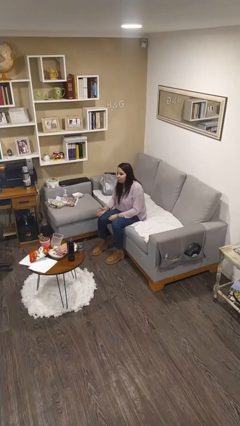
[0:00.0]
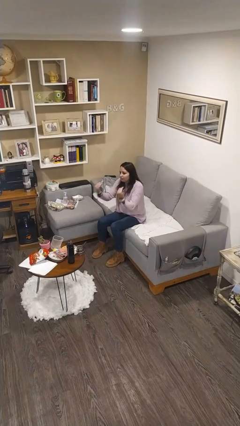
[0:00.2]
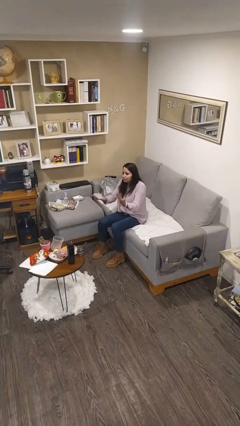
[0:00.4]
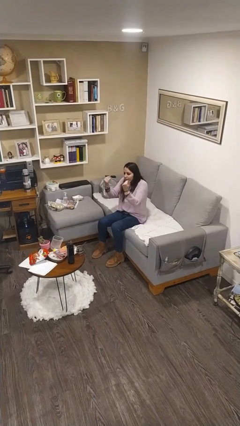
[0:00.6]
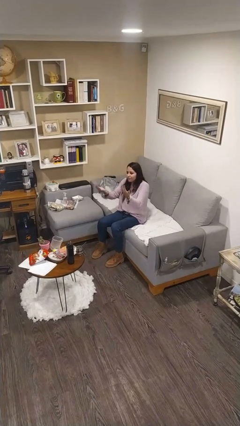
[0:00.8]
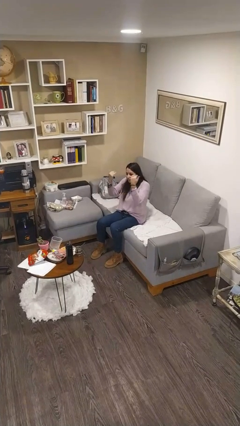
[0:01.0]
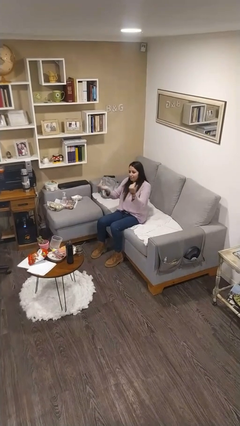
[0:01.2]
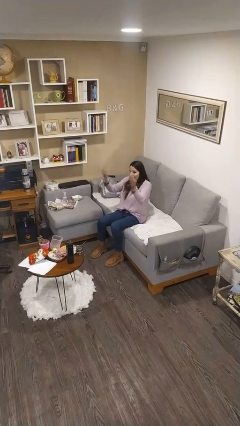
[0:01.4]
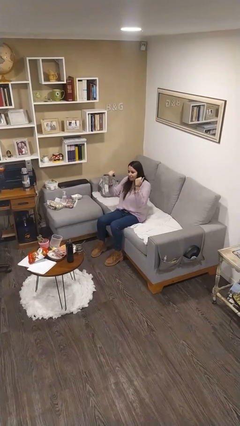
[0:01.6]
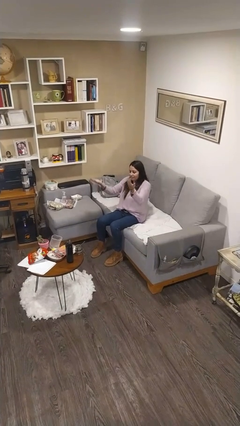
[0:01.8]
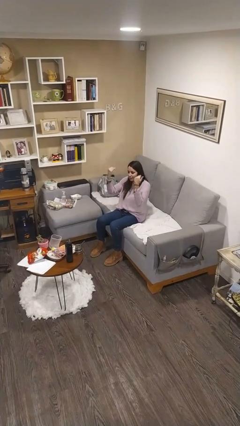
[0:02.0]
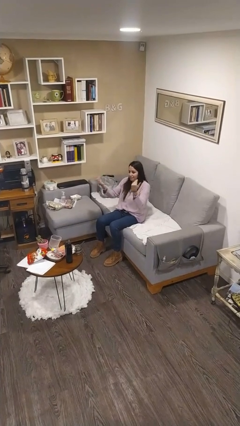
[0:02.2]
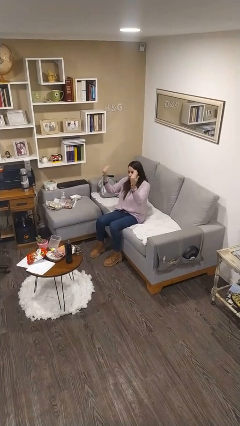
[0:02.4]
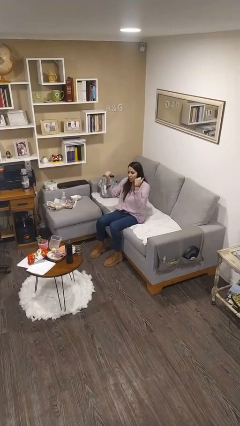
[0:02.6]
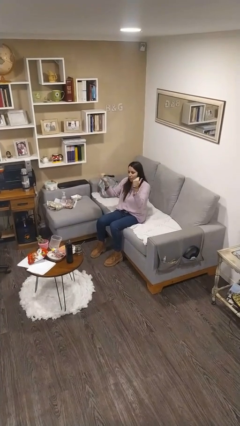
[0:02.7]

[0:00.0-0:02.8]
person gestures come here

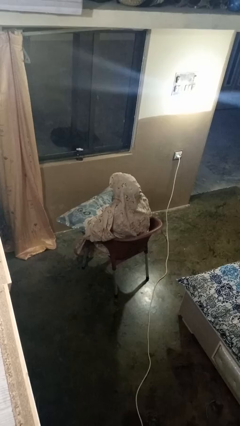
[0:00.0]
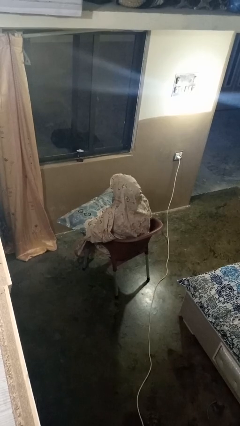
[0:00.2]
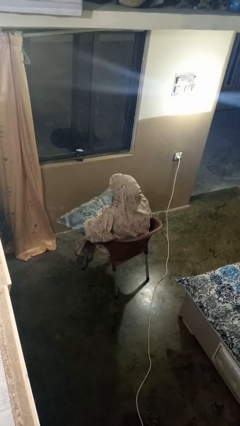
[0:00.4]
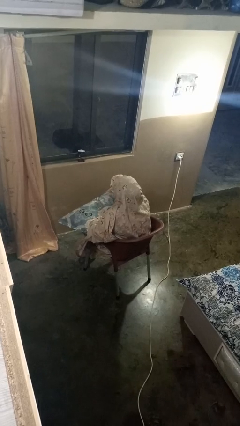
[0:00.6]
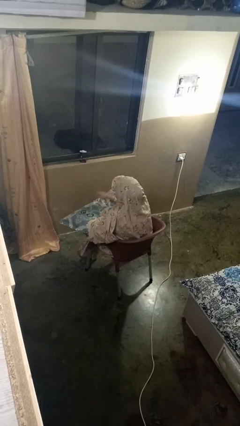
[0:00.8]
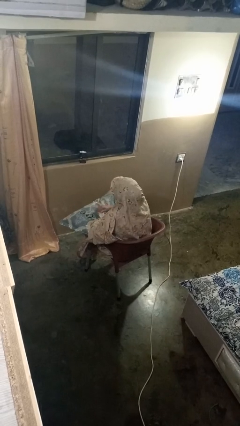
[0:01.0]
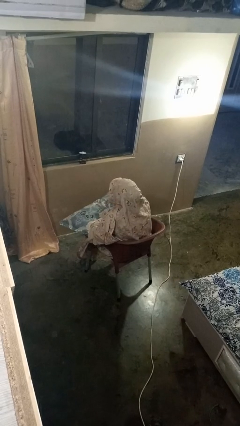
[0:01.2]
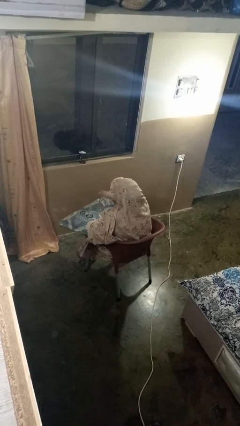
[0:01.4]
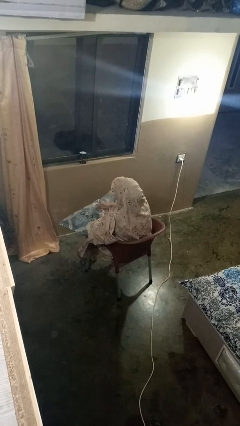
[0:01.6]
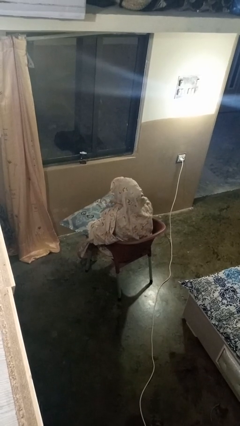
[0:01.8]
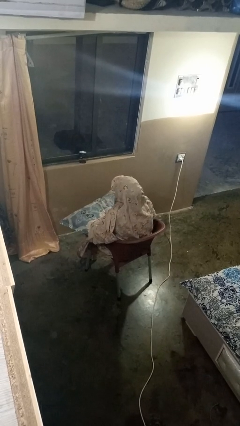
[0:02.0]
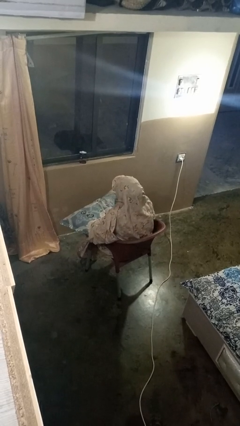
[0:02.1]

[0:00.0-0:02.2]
person waves hand over object

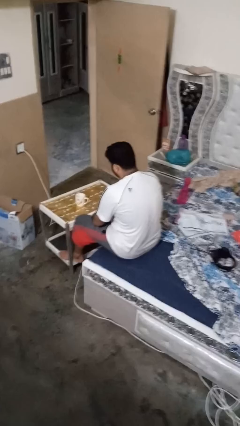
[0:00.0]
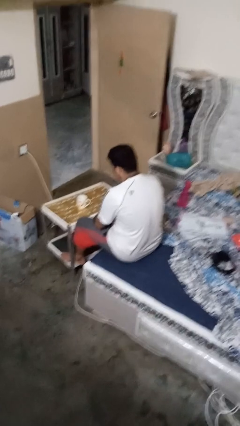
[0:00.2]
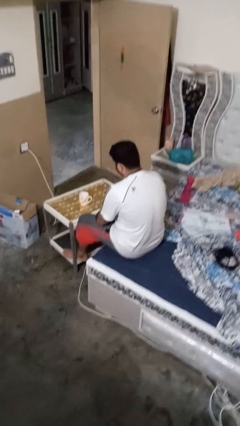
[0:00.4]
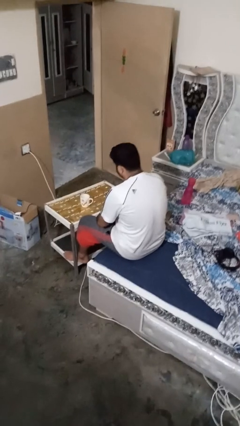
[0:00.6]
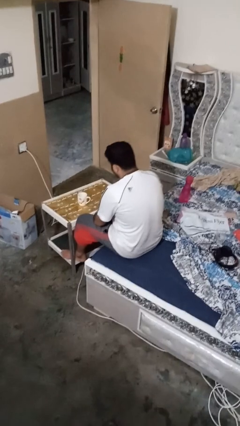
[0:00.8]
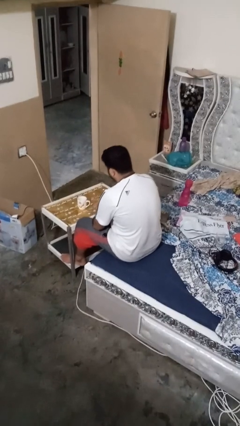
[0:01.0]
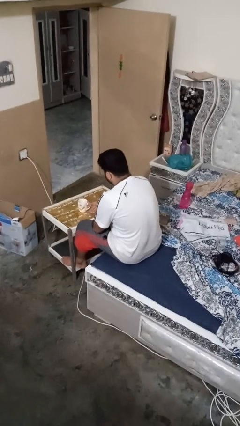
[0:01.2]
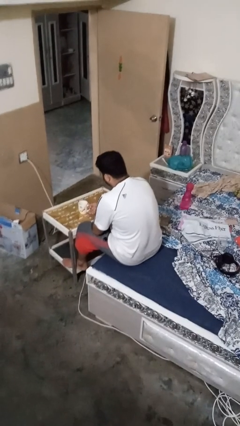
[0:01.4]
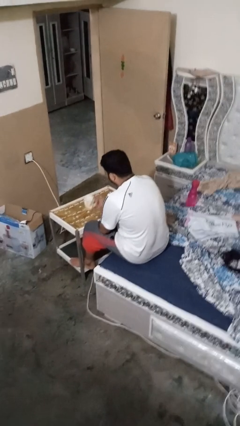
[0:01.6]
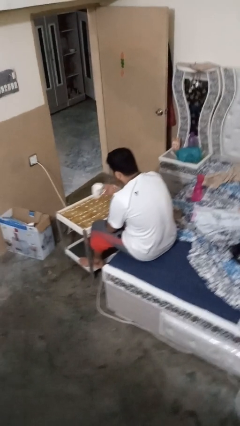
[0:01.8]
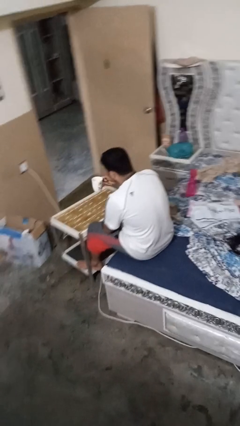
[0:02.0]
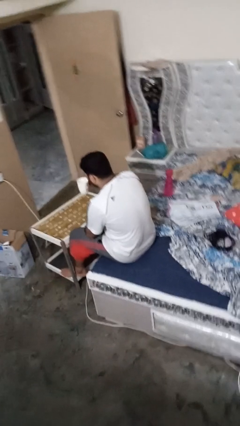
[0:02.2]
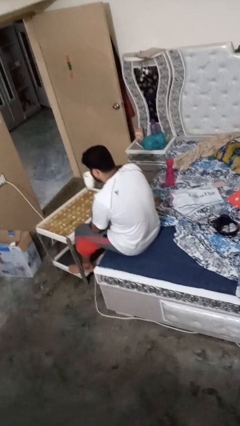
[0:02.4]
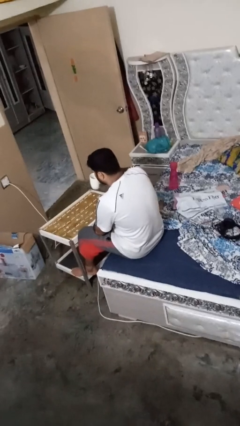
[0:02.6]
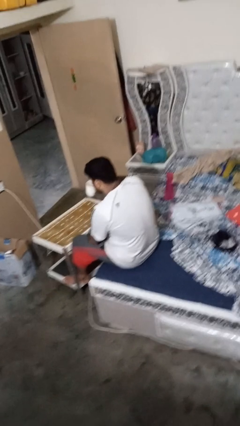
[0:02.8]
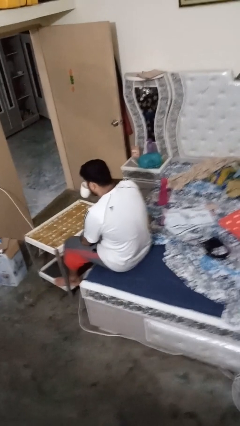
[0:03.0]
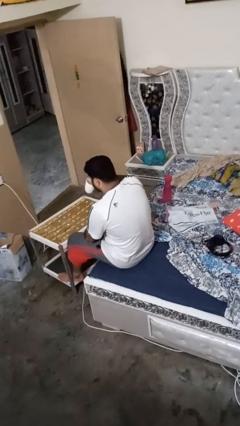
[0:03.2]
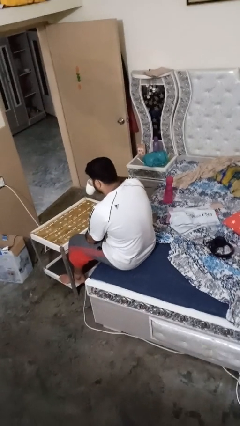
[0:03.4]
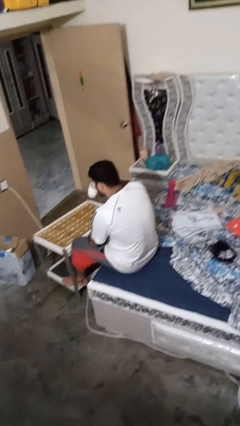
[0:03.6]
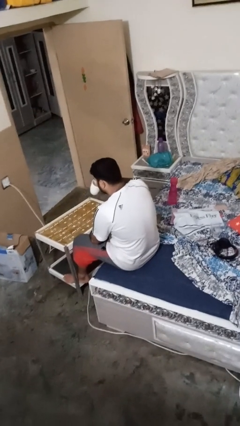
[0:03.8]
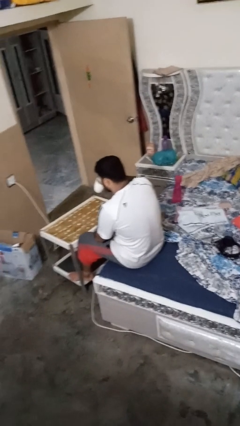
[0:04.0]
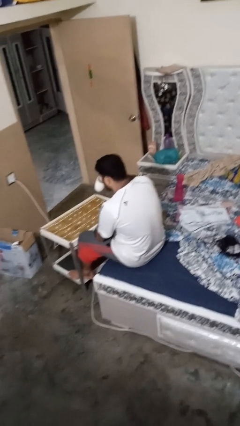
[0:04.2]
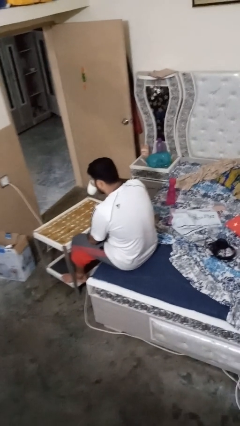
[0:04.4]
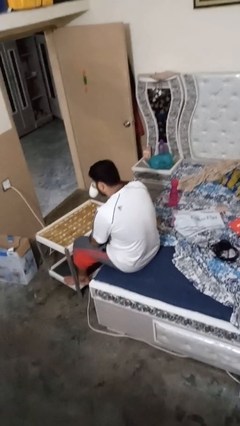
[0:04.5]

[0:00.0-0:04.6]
person picks up object from table

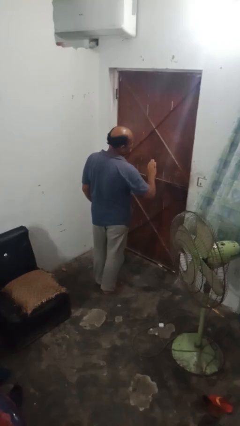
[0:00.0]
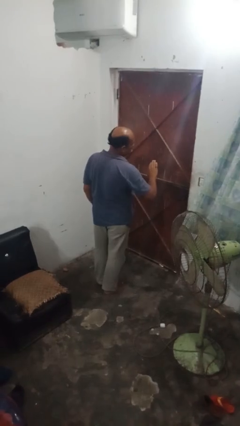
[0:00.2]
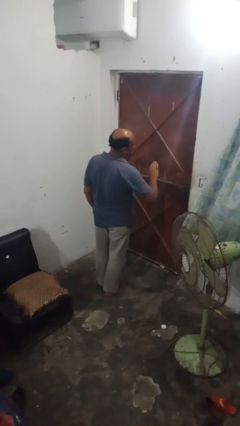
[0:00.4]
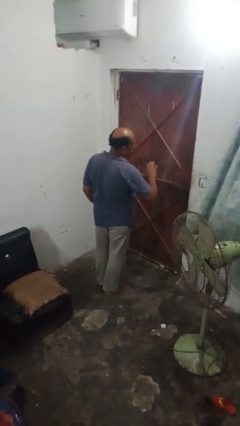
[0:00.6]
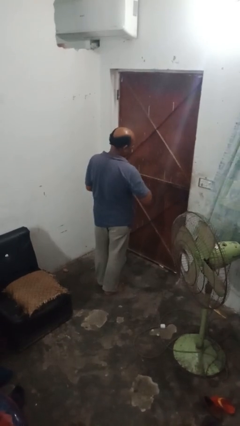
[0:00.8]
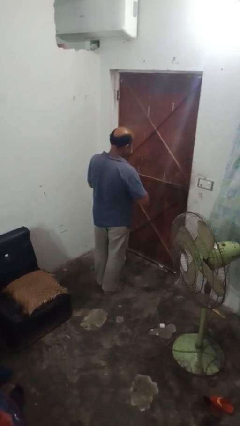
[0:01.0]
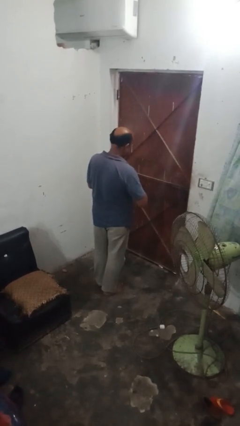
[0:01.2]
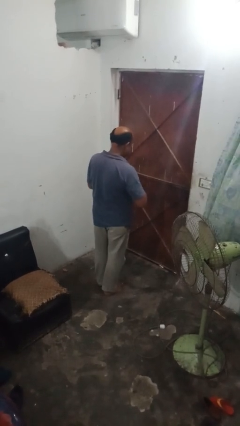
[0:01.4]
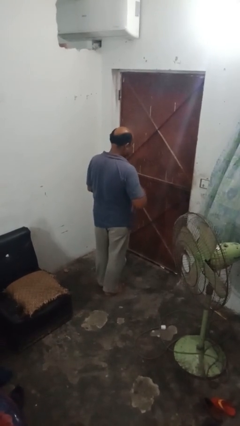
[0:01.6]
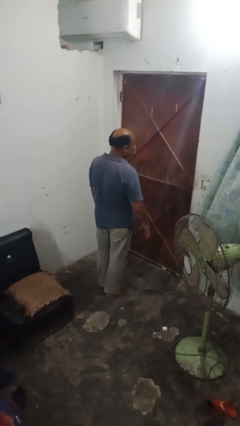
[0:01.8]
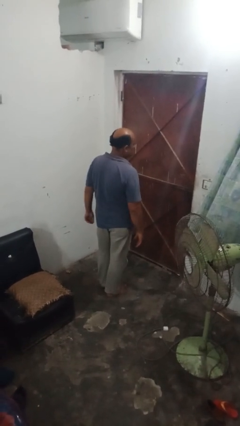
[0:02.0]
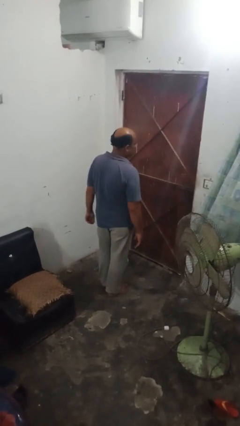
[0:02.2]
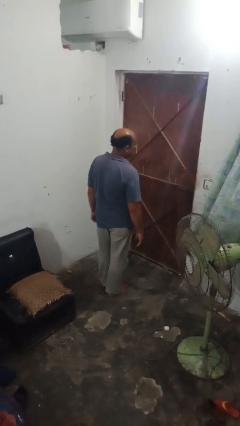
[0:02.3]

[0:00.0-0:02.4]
person takes off ring

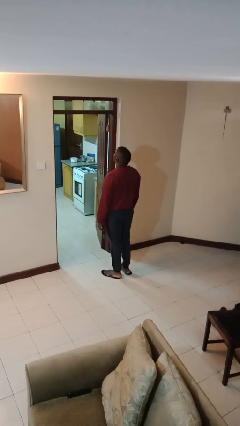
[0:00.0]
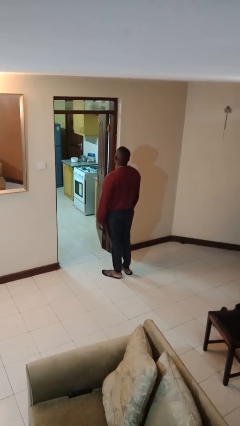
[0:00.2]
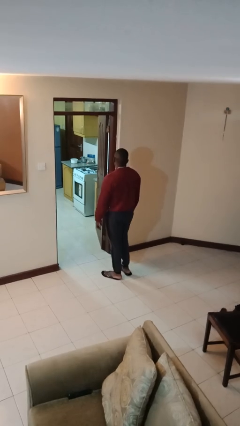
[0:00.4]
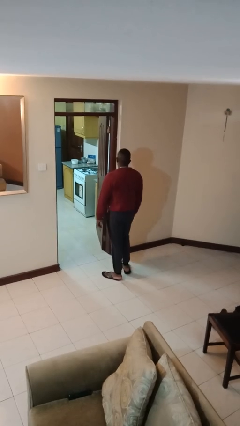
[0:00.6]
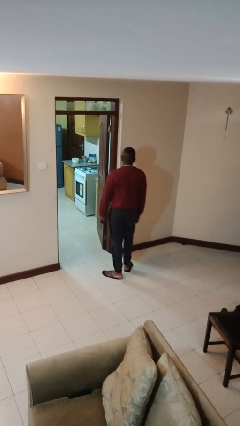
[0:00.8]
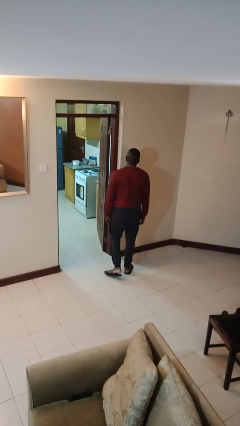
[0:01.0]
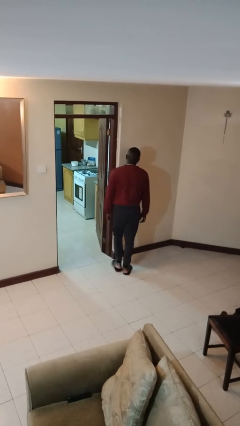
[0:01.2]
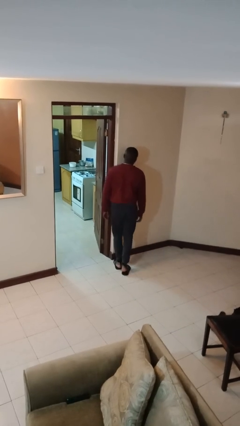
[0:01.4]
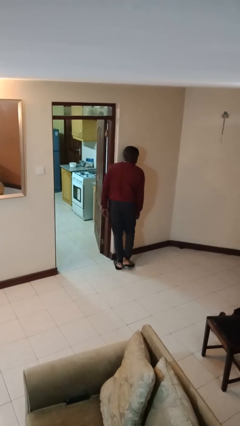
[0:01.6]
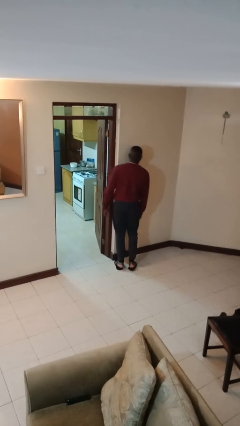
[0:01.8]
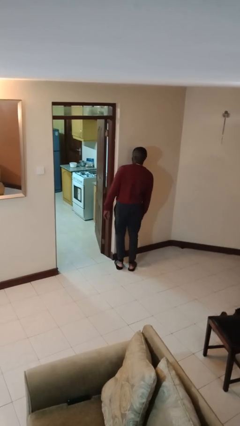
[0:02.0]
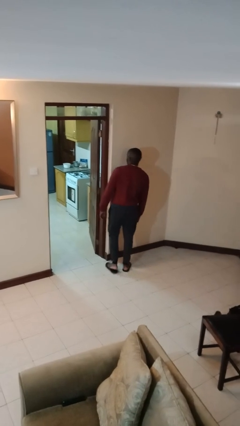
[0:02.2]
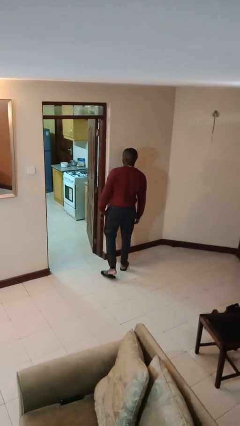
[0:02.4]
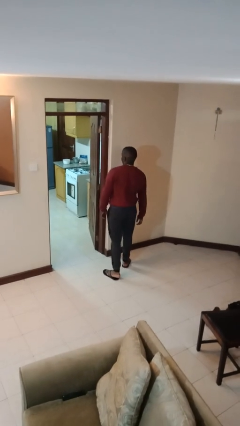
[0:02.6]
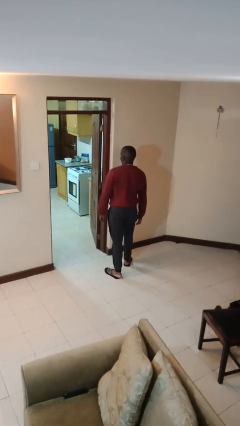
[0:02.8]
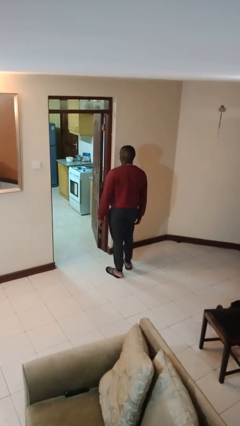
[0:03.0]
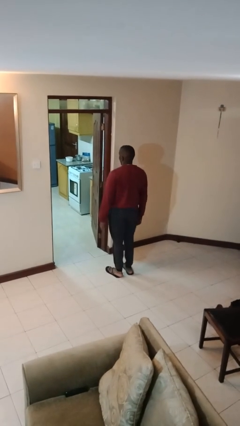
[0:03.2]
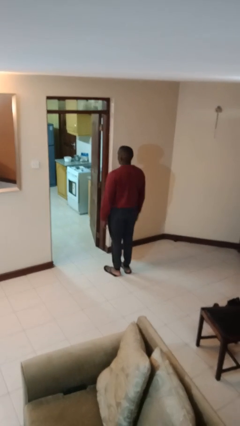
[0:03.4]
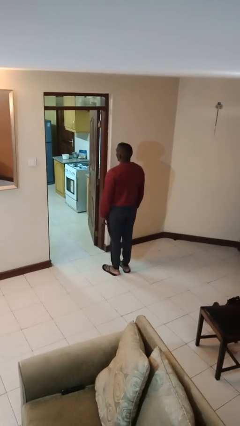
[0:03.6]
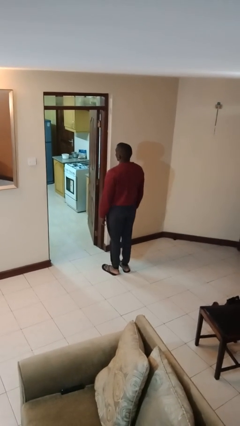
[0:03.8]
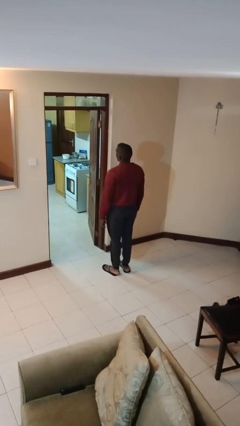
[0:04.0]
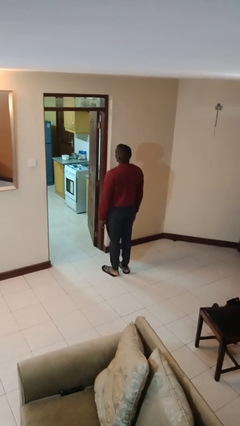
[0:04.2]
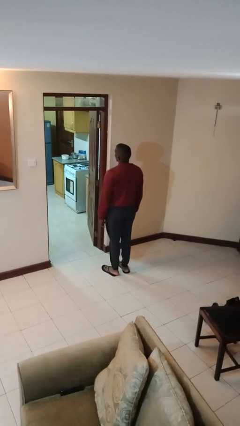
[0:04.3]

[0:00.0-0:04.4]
person bumps into wall

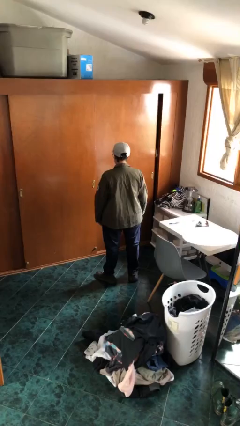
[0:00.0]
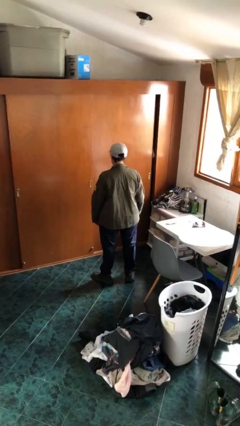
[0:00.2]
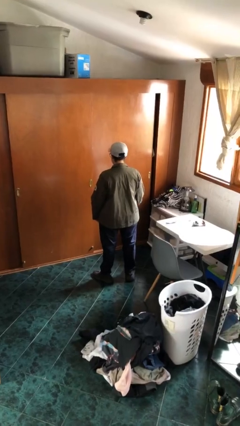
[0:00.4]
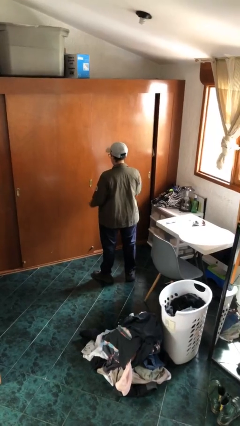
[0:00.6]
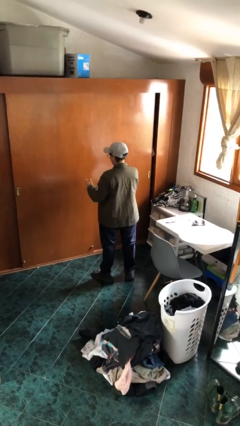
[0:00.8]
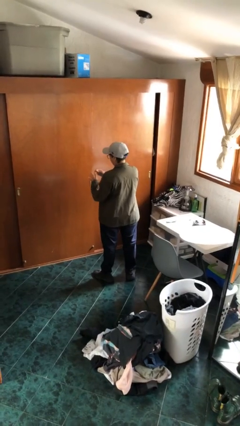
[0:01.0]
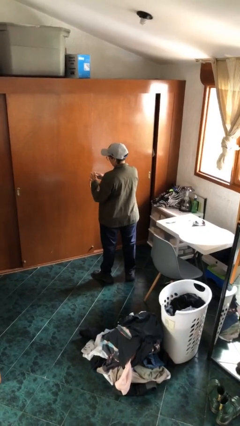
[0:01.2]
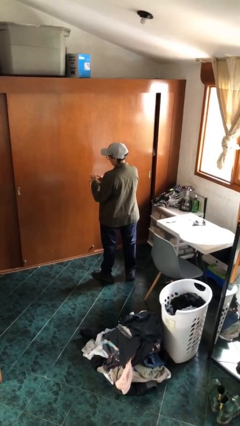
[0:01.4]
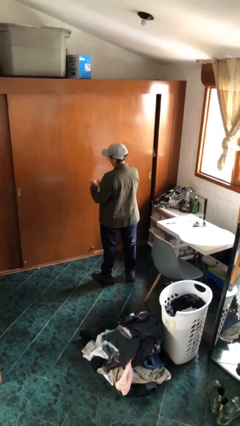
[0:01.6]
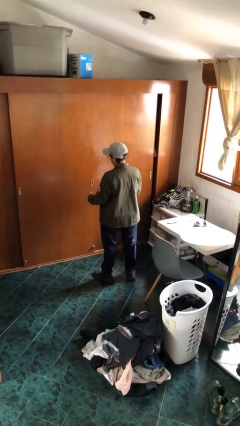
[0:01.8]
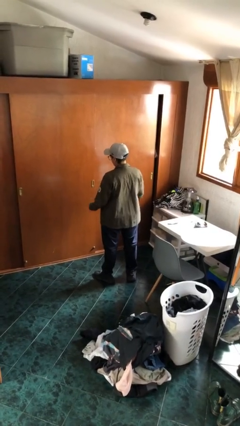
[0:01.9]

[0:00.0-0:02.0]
person puts on ring
